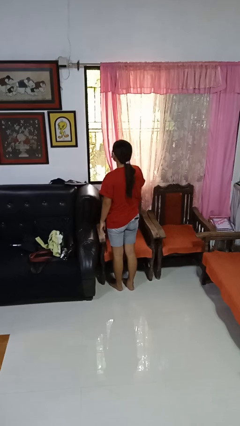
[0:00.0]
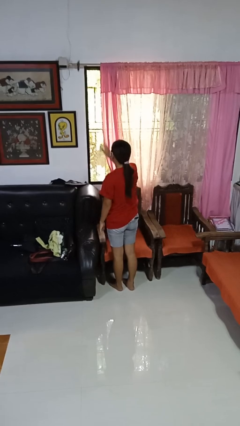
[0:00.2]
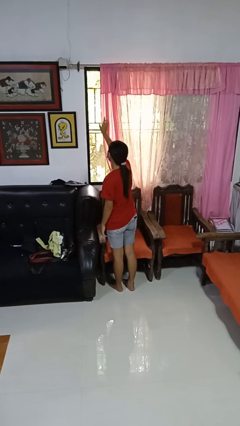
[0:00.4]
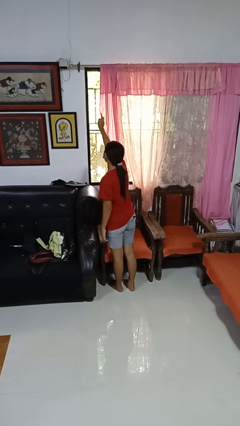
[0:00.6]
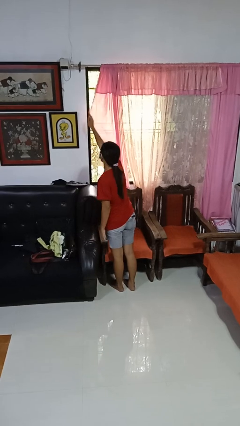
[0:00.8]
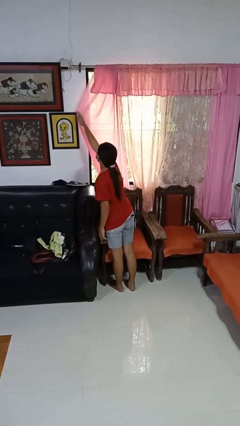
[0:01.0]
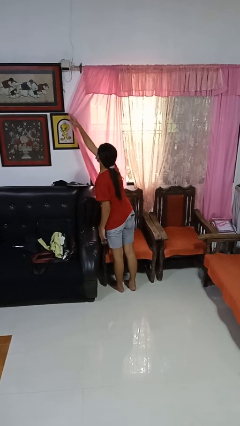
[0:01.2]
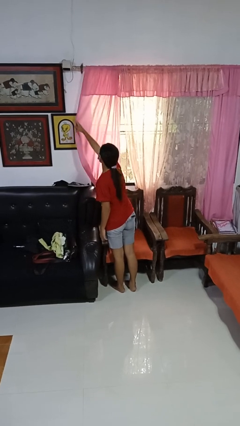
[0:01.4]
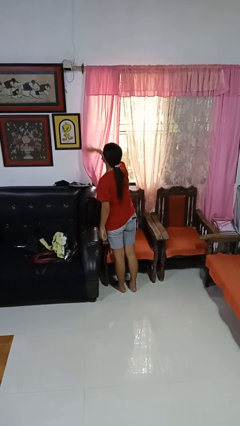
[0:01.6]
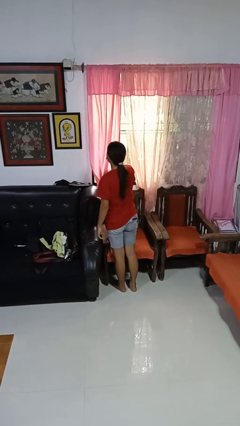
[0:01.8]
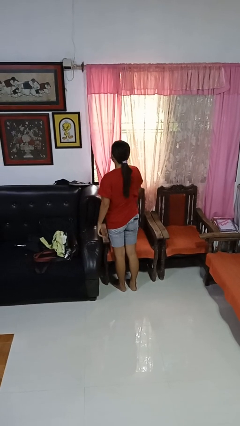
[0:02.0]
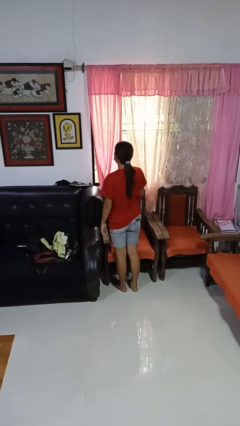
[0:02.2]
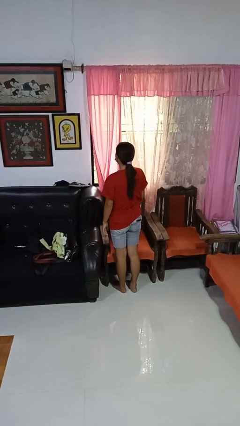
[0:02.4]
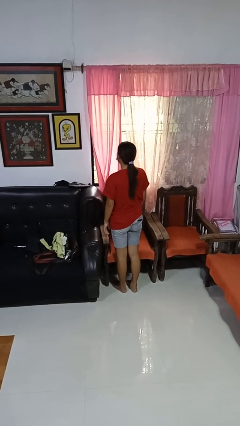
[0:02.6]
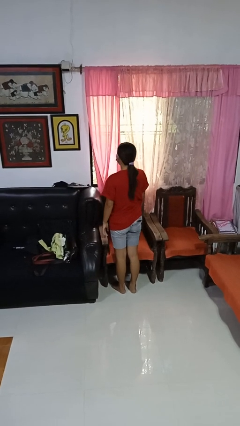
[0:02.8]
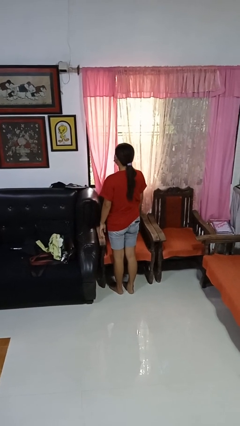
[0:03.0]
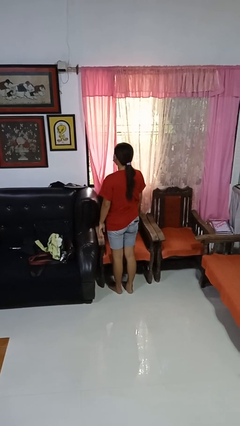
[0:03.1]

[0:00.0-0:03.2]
person closes curtains

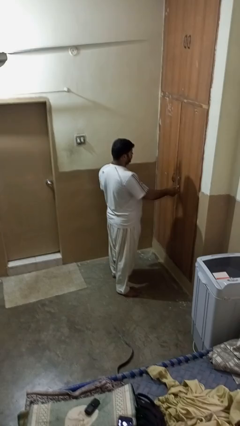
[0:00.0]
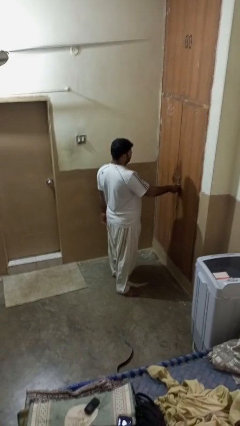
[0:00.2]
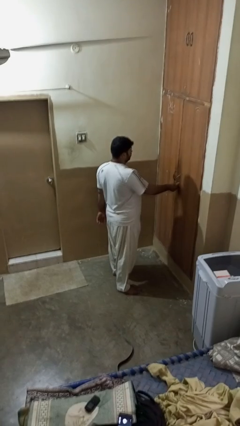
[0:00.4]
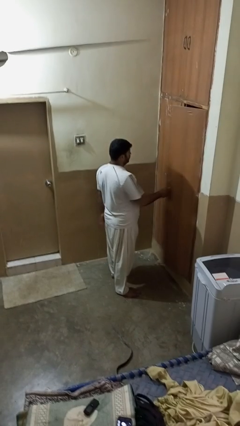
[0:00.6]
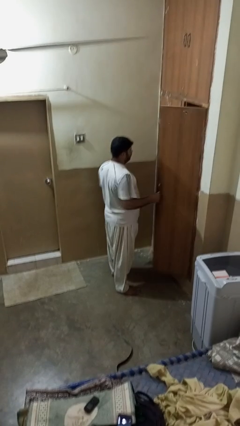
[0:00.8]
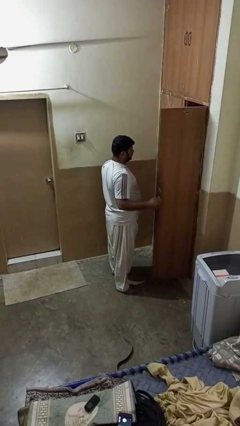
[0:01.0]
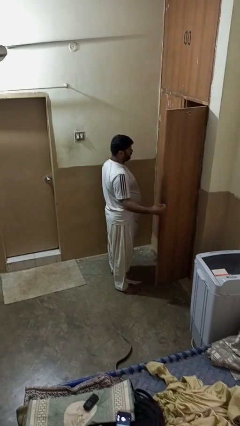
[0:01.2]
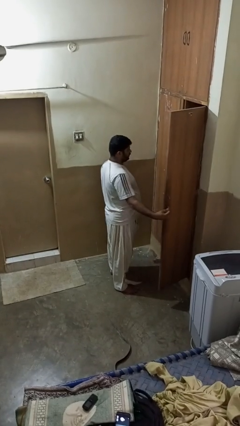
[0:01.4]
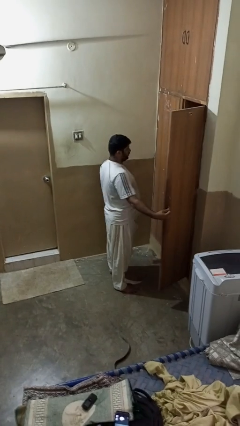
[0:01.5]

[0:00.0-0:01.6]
person opens closet door

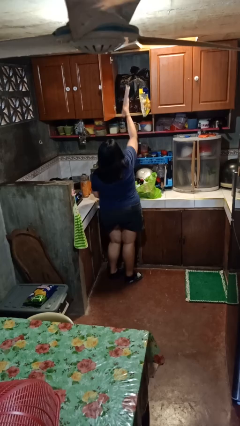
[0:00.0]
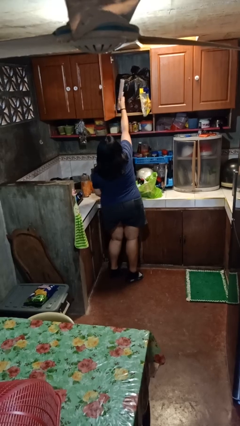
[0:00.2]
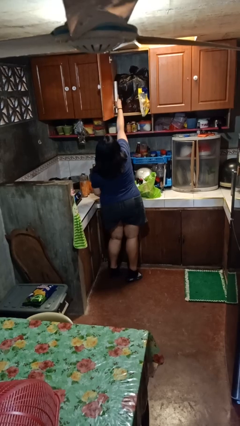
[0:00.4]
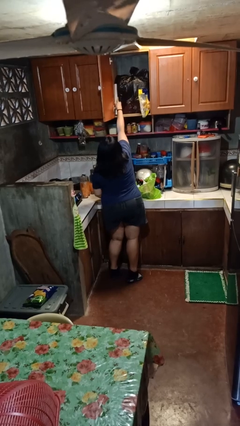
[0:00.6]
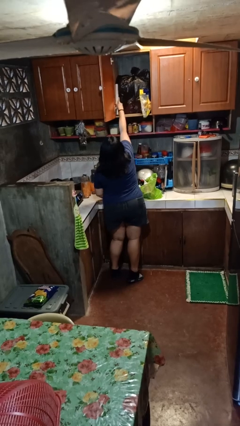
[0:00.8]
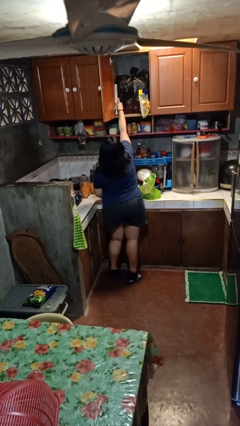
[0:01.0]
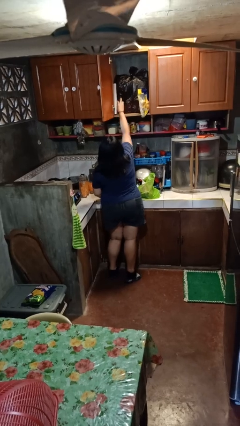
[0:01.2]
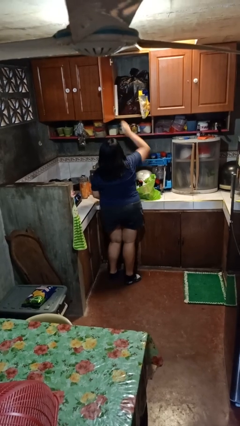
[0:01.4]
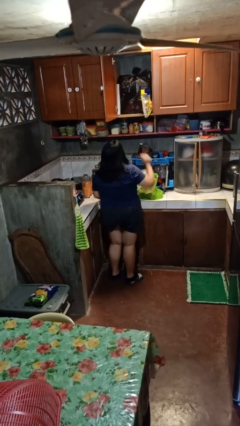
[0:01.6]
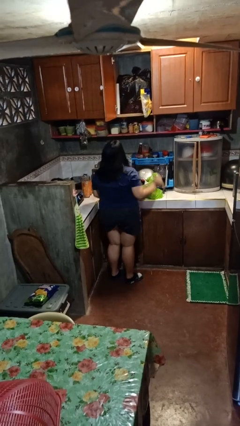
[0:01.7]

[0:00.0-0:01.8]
person loads groceries into cabinet

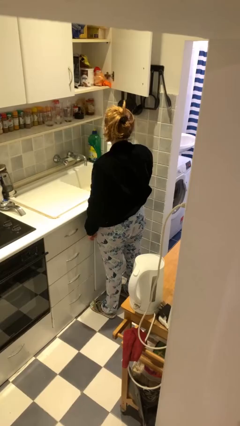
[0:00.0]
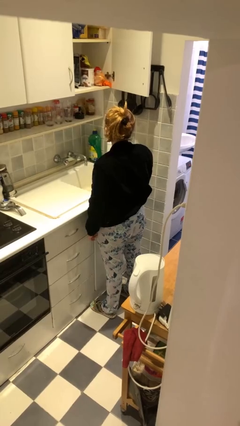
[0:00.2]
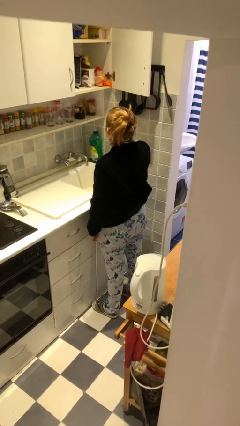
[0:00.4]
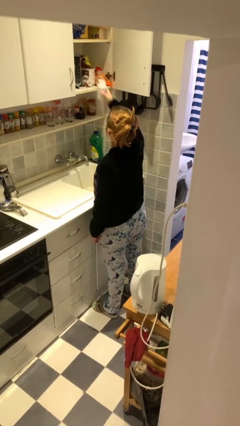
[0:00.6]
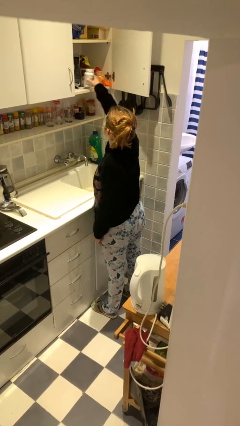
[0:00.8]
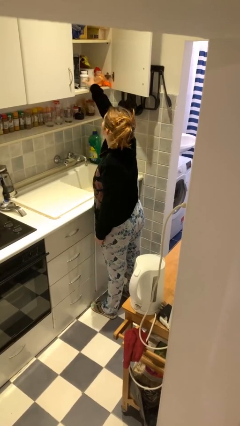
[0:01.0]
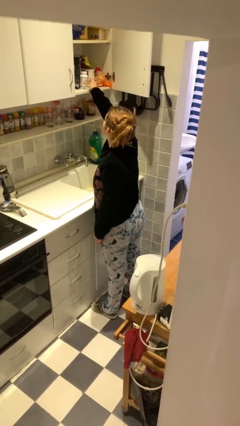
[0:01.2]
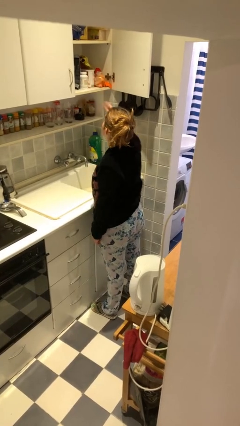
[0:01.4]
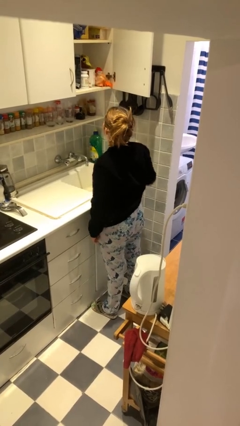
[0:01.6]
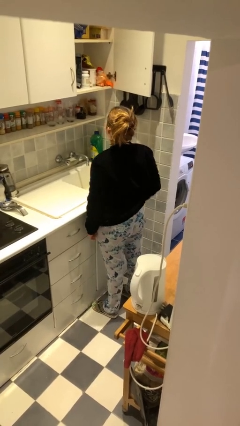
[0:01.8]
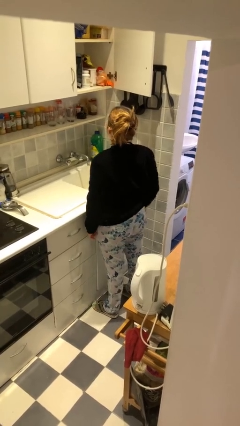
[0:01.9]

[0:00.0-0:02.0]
person takes object from cabinet

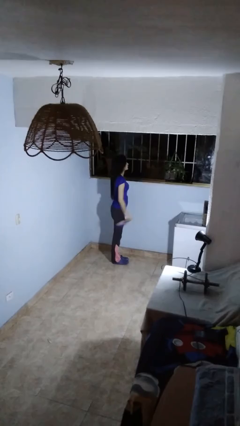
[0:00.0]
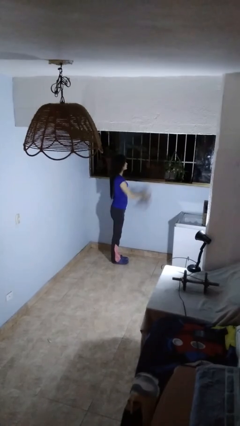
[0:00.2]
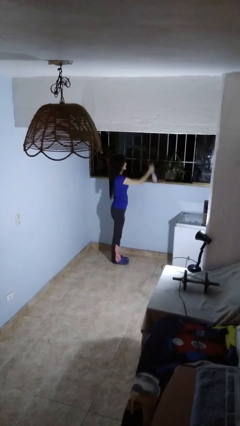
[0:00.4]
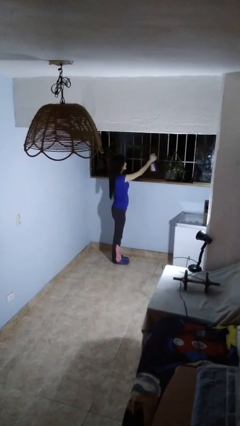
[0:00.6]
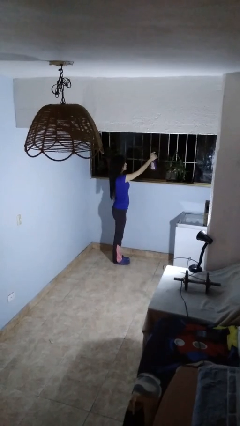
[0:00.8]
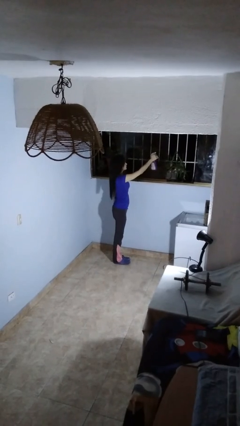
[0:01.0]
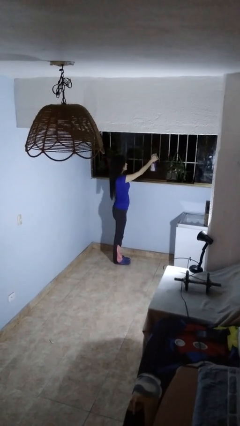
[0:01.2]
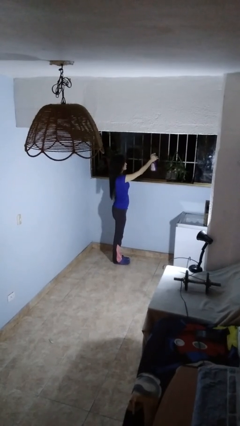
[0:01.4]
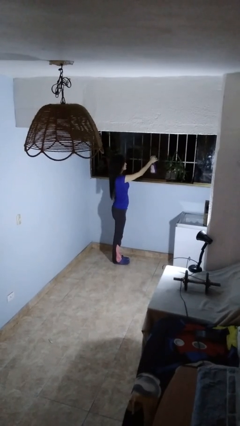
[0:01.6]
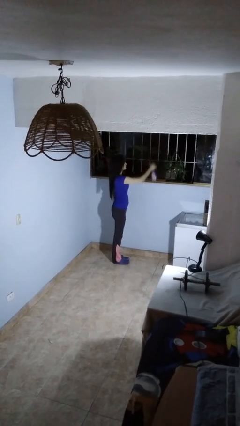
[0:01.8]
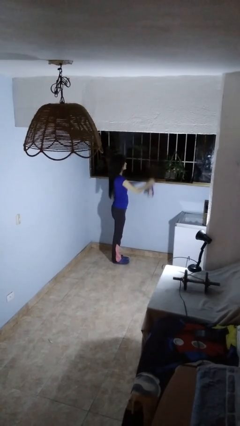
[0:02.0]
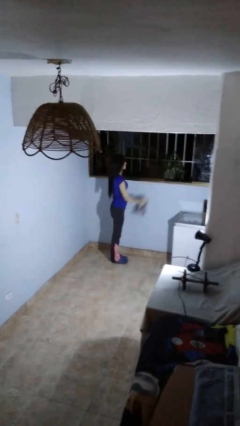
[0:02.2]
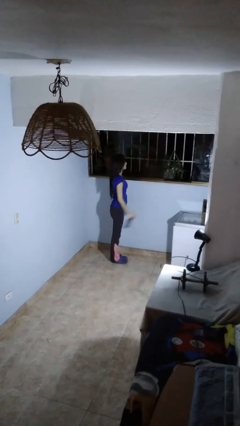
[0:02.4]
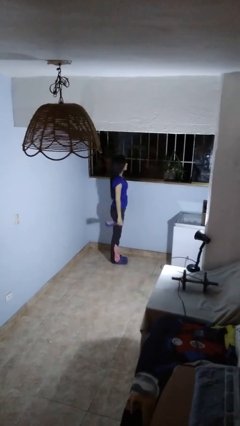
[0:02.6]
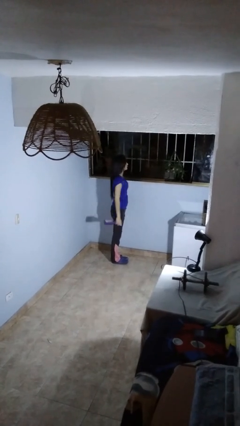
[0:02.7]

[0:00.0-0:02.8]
person sprays from bottle

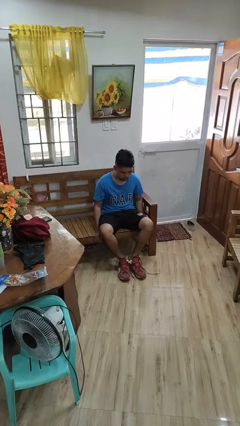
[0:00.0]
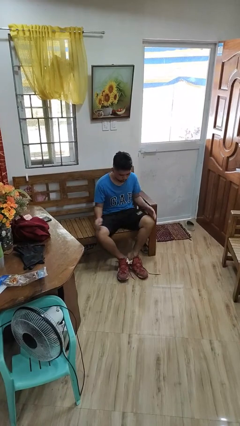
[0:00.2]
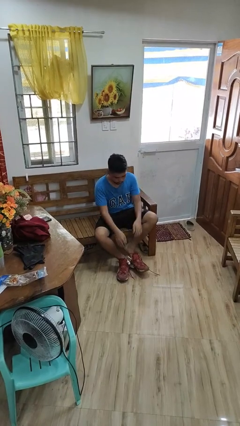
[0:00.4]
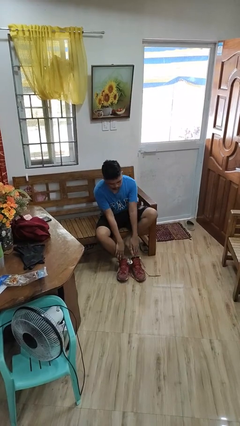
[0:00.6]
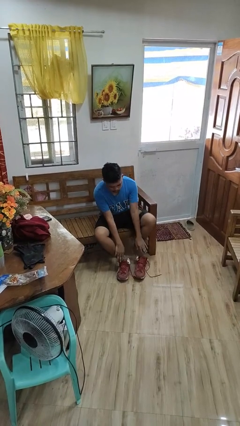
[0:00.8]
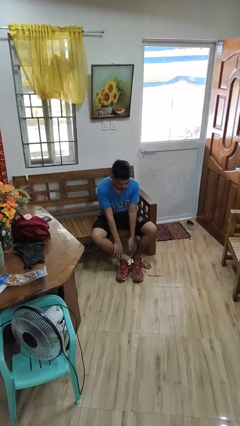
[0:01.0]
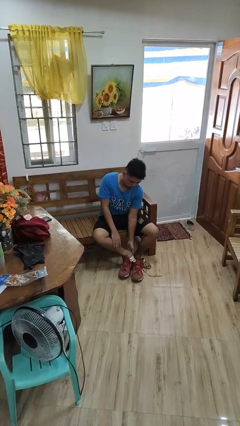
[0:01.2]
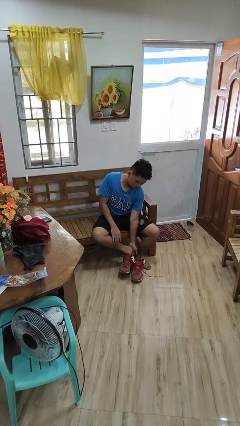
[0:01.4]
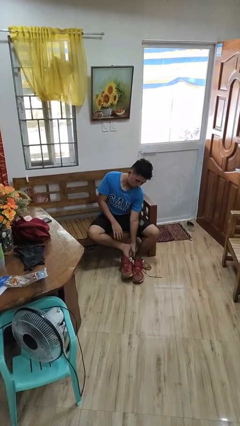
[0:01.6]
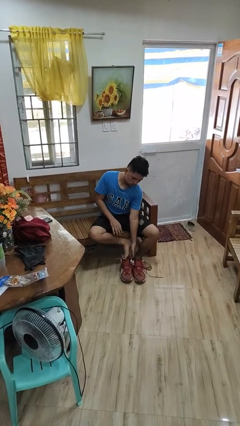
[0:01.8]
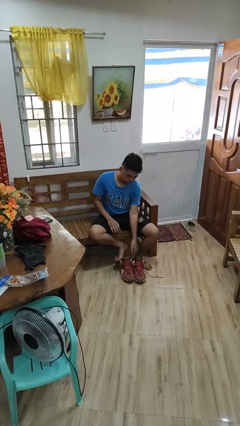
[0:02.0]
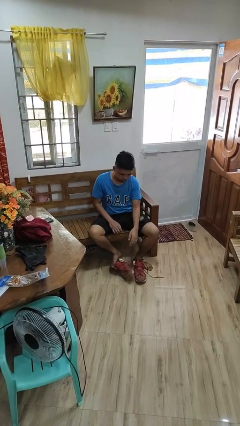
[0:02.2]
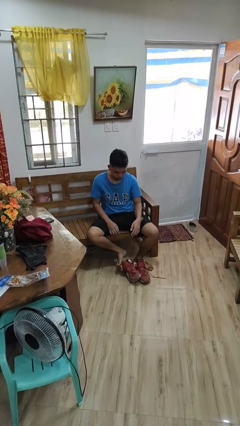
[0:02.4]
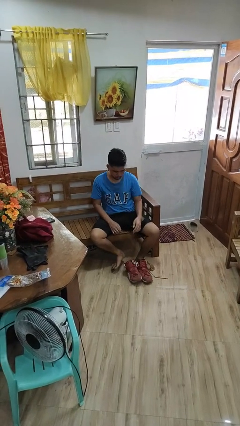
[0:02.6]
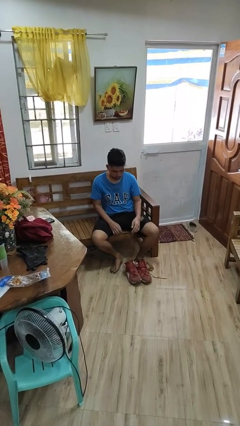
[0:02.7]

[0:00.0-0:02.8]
person takes off shoes

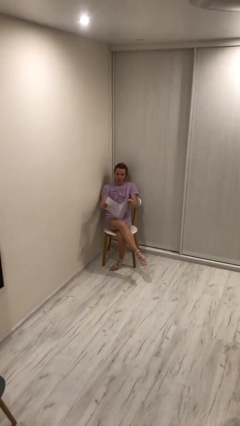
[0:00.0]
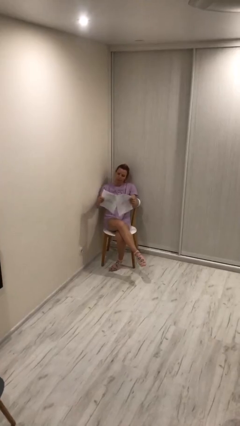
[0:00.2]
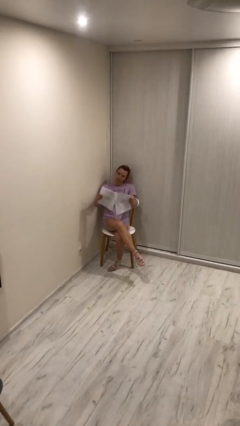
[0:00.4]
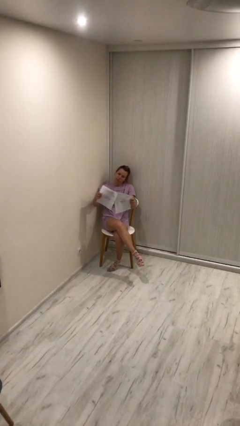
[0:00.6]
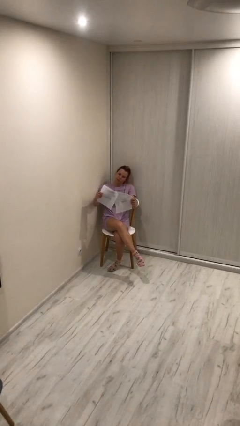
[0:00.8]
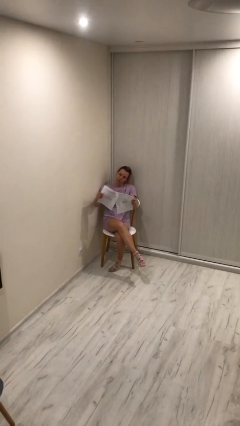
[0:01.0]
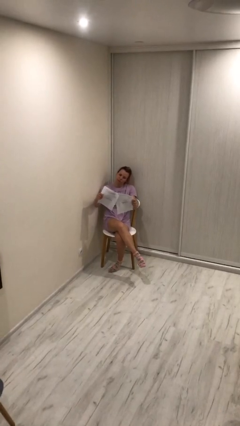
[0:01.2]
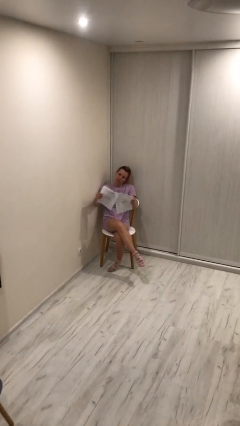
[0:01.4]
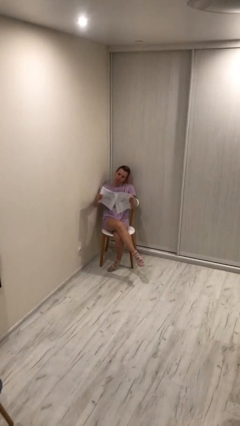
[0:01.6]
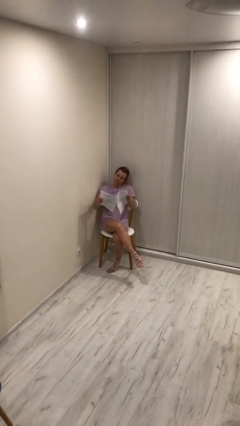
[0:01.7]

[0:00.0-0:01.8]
person reads newspaper

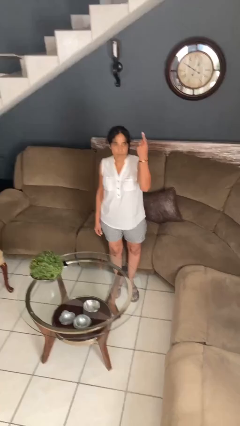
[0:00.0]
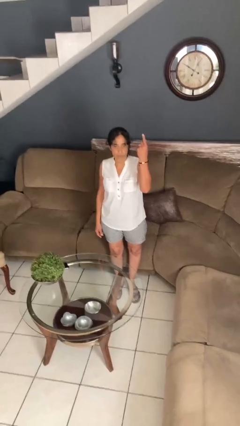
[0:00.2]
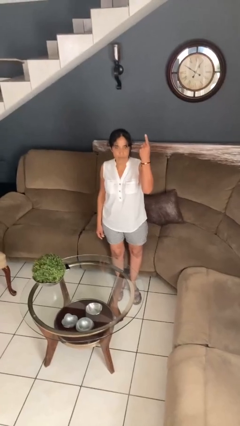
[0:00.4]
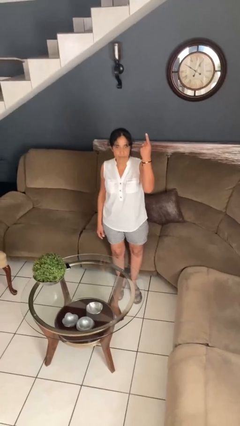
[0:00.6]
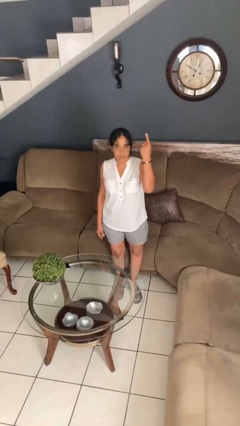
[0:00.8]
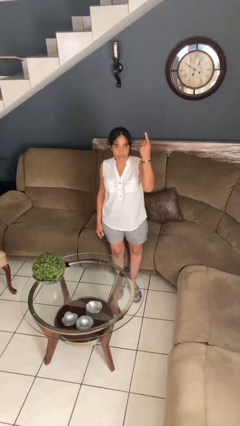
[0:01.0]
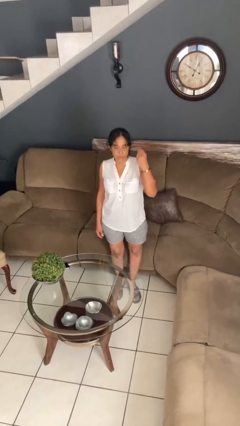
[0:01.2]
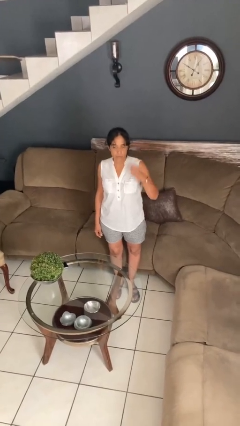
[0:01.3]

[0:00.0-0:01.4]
person gestures number one
